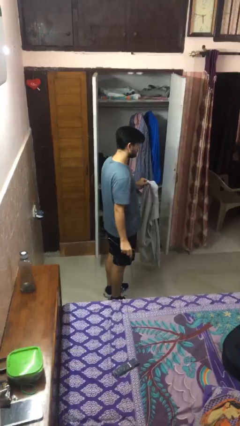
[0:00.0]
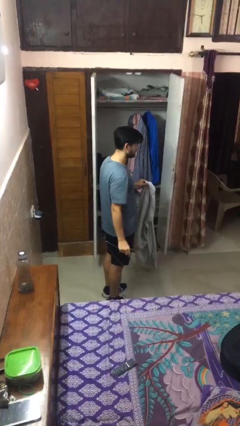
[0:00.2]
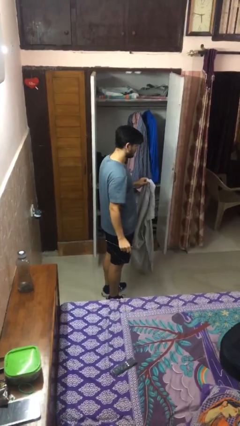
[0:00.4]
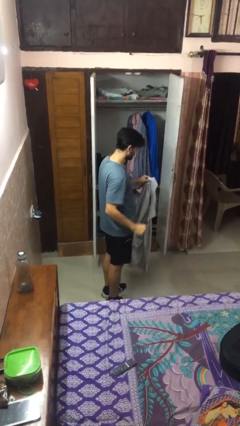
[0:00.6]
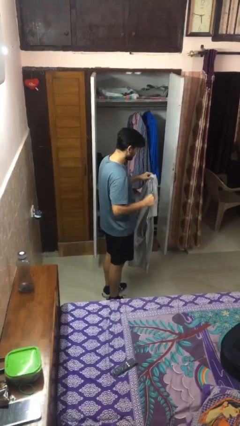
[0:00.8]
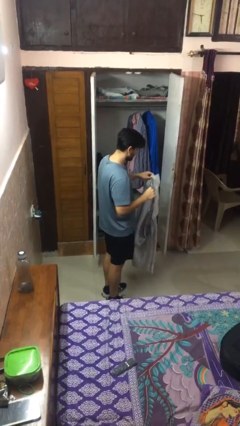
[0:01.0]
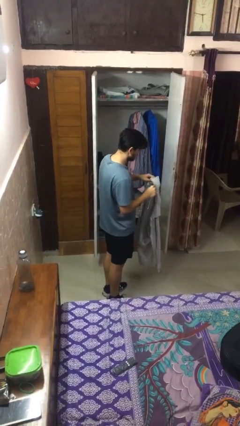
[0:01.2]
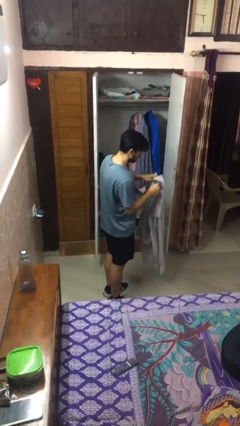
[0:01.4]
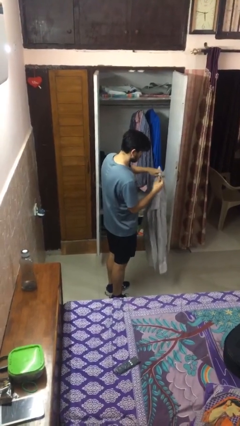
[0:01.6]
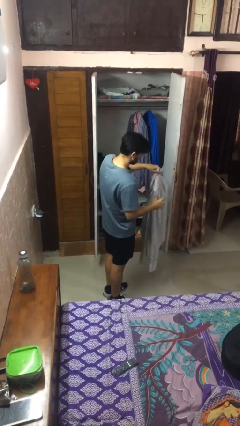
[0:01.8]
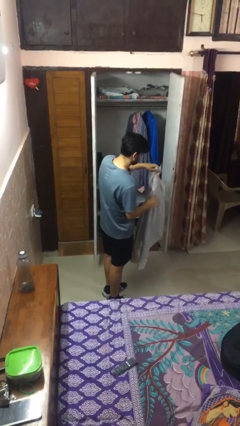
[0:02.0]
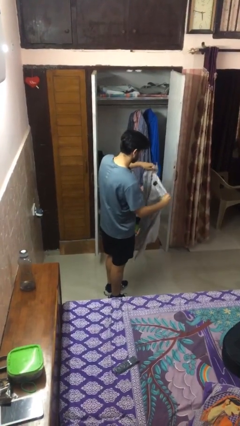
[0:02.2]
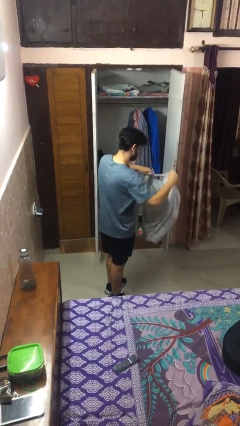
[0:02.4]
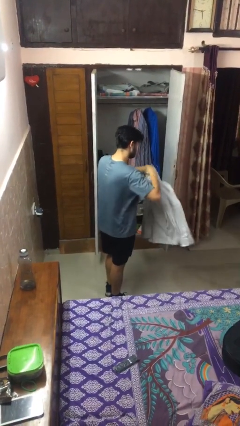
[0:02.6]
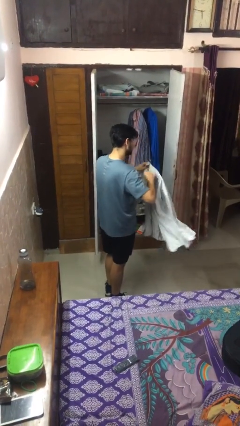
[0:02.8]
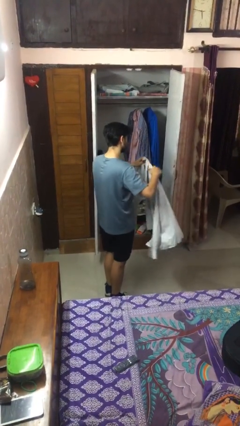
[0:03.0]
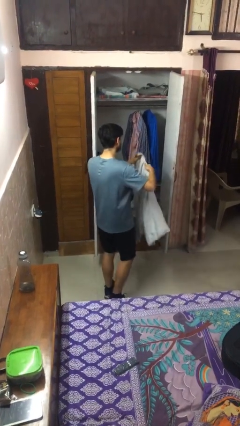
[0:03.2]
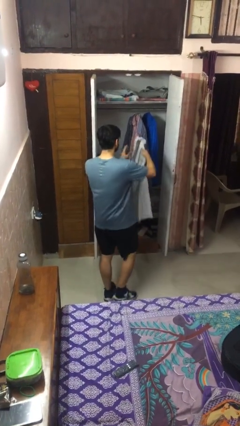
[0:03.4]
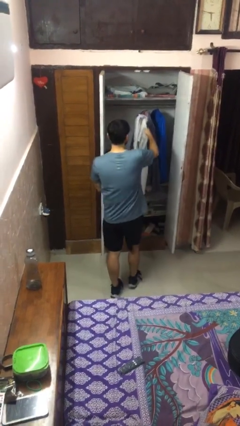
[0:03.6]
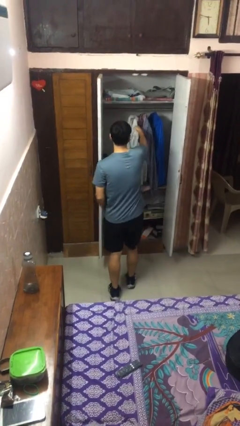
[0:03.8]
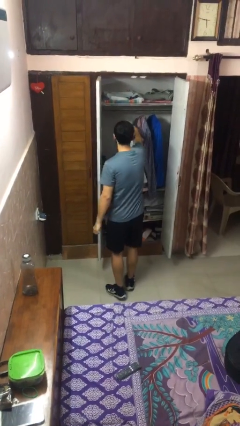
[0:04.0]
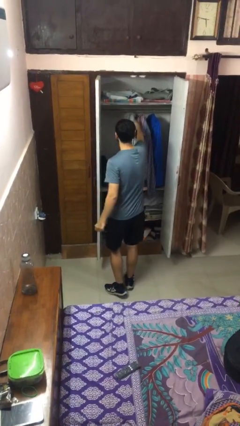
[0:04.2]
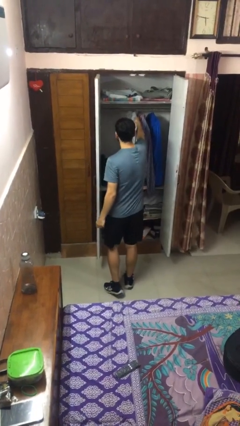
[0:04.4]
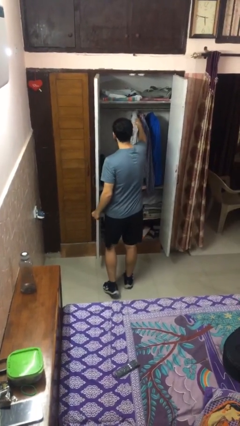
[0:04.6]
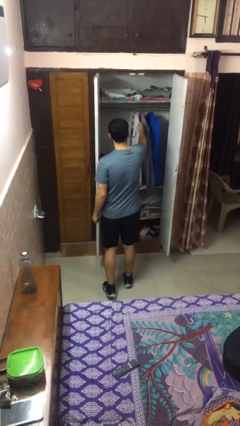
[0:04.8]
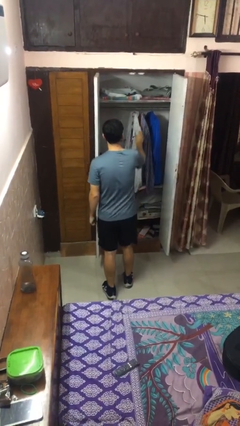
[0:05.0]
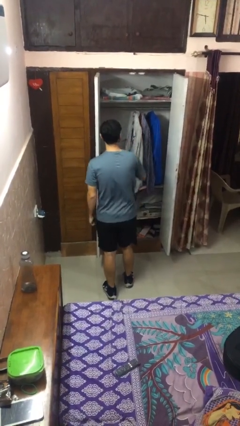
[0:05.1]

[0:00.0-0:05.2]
person puts clothes into closet

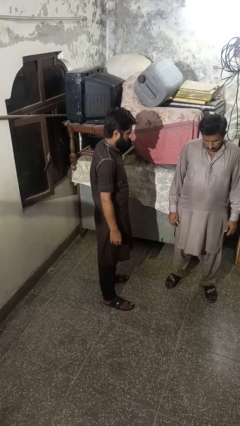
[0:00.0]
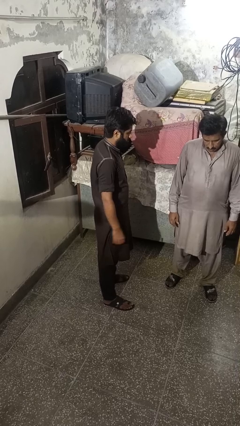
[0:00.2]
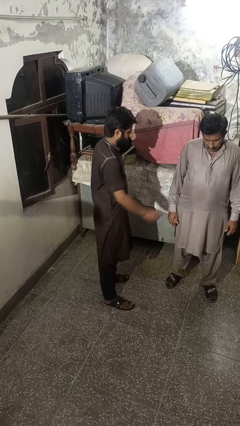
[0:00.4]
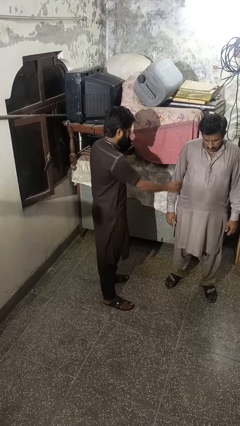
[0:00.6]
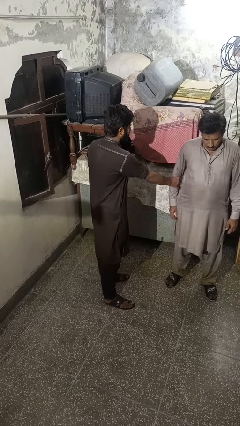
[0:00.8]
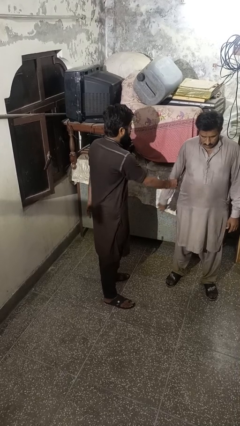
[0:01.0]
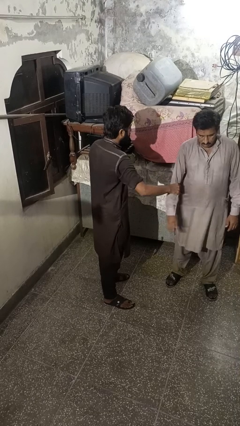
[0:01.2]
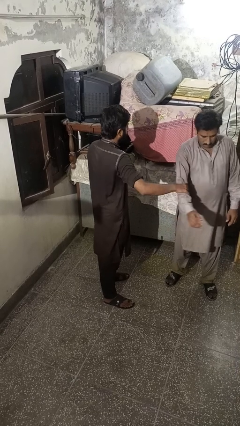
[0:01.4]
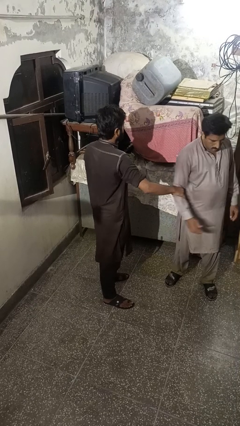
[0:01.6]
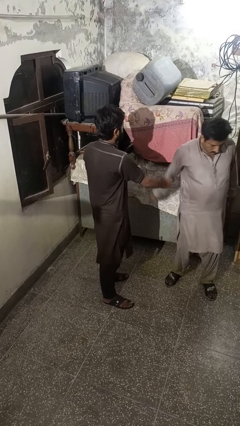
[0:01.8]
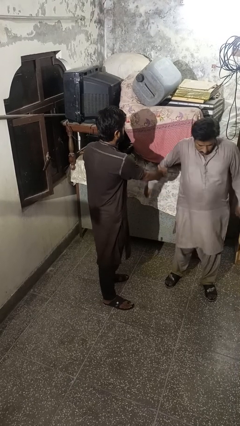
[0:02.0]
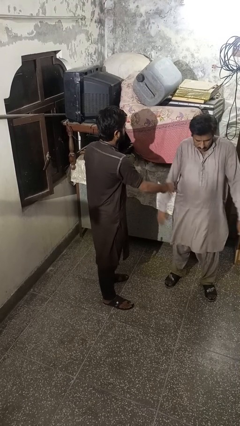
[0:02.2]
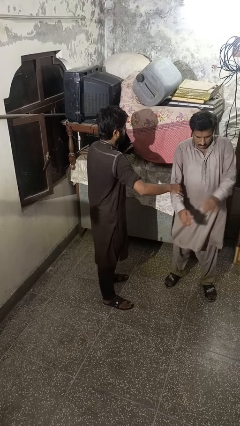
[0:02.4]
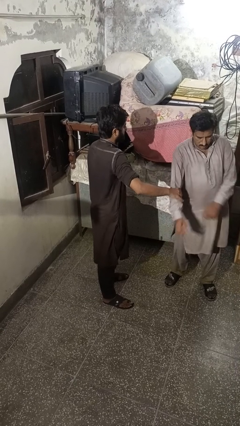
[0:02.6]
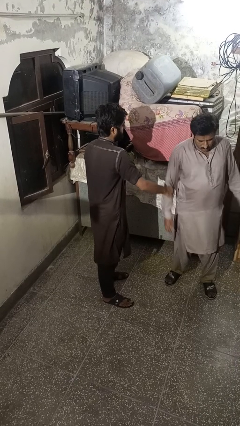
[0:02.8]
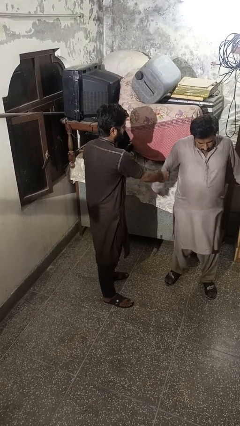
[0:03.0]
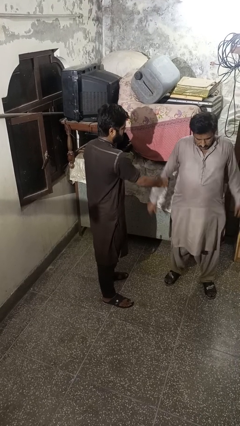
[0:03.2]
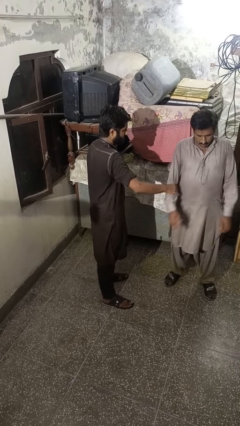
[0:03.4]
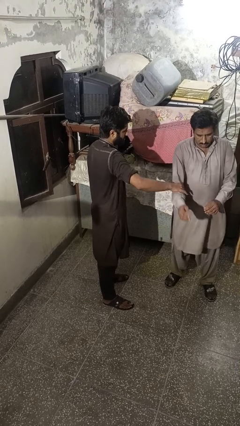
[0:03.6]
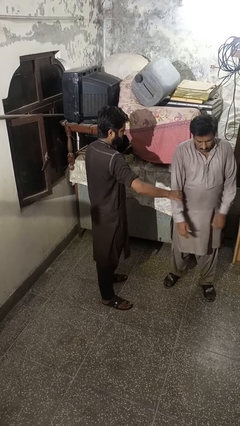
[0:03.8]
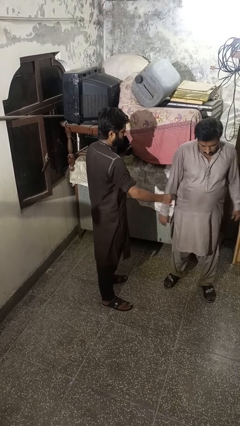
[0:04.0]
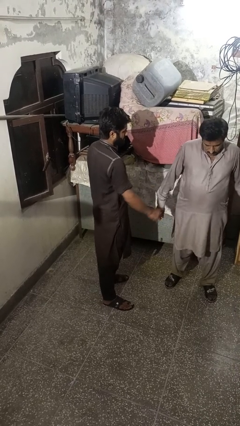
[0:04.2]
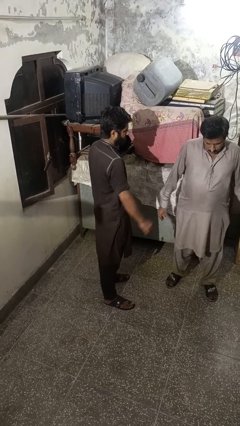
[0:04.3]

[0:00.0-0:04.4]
person grabs person by forearm

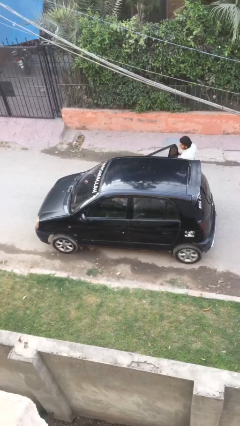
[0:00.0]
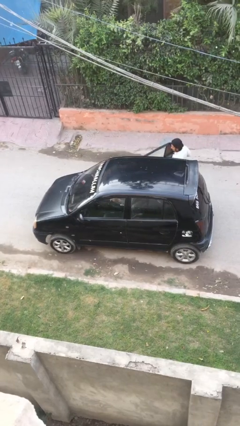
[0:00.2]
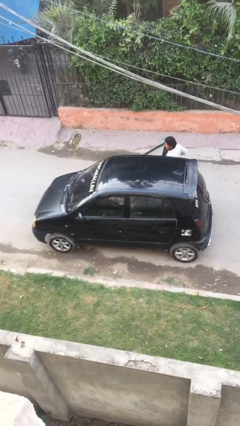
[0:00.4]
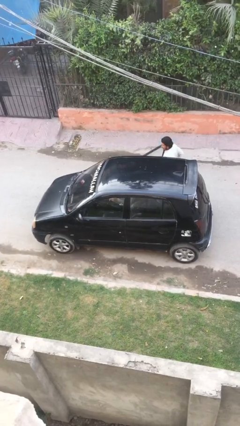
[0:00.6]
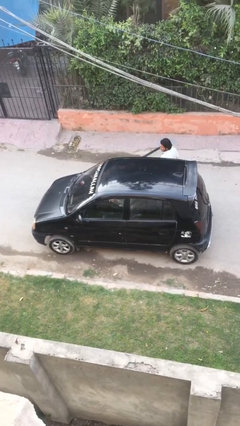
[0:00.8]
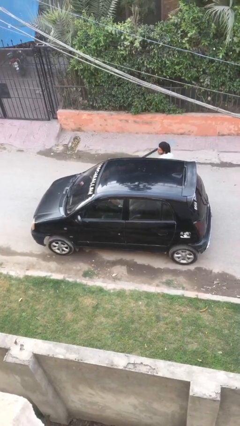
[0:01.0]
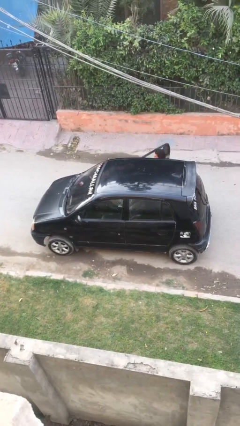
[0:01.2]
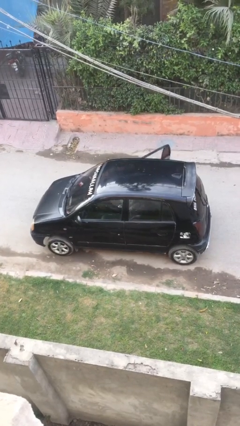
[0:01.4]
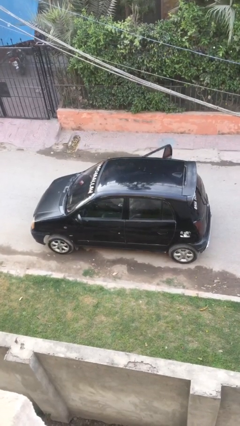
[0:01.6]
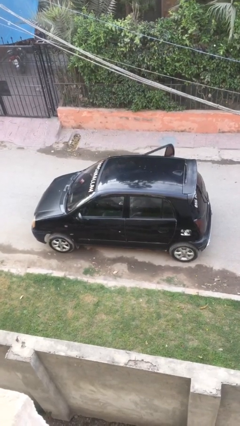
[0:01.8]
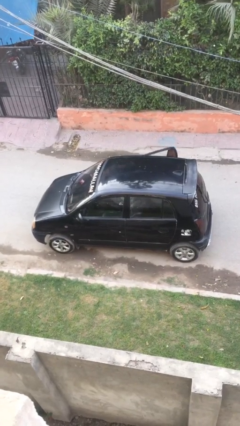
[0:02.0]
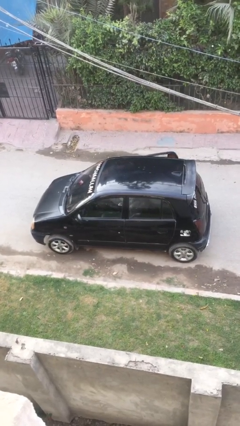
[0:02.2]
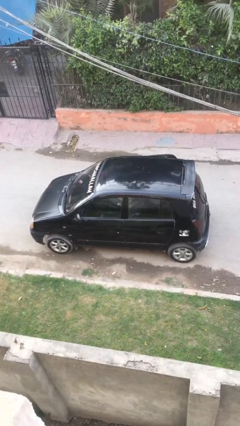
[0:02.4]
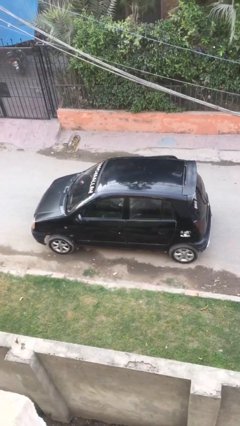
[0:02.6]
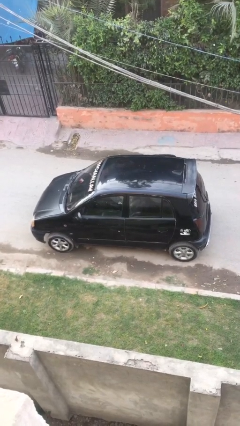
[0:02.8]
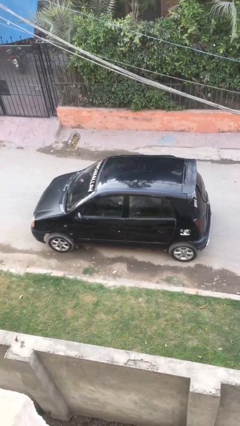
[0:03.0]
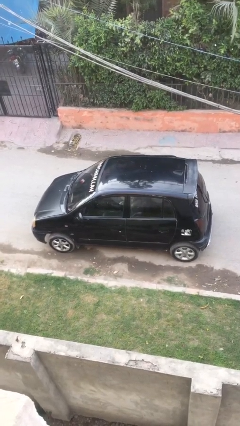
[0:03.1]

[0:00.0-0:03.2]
car picks up person

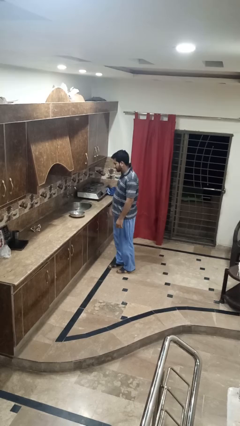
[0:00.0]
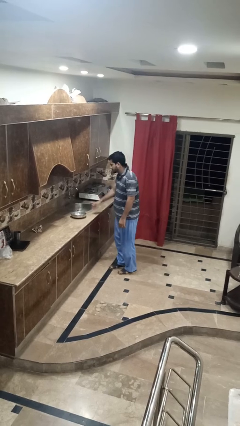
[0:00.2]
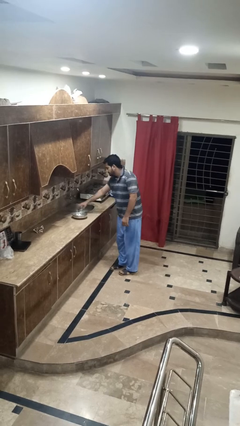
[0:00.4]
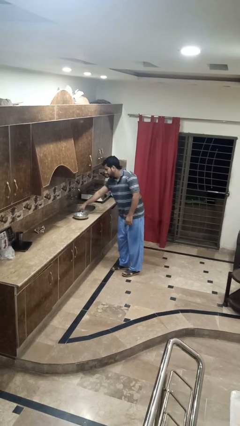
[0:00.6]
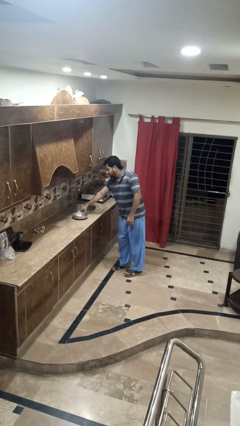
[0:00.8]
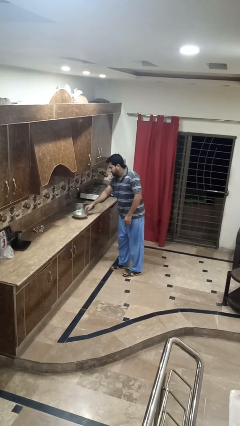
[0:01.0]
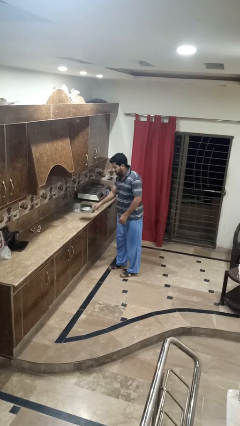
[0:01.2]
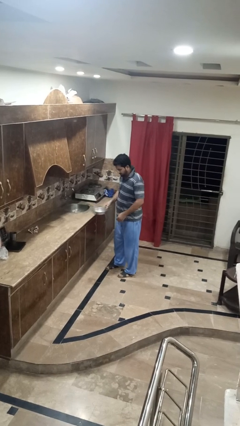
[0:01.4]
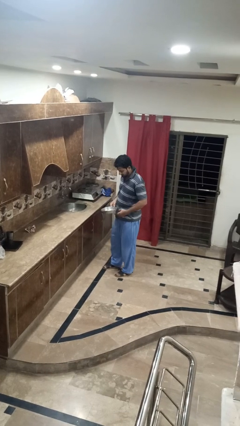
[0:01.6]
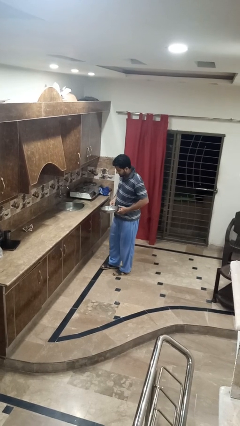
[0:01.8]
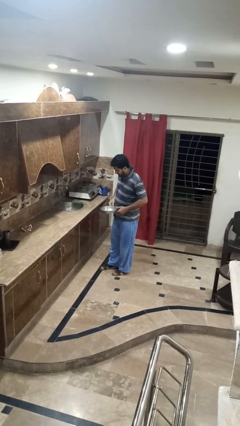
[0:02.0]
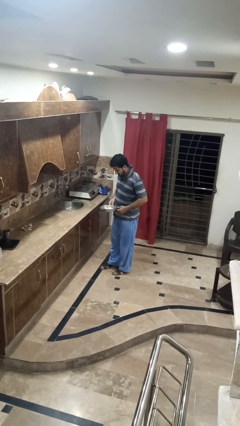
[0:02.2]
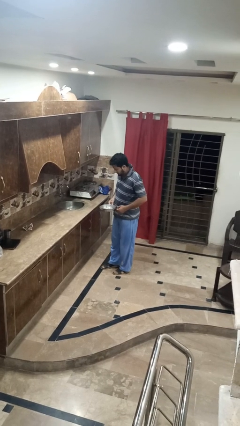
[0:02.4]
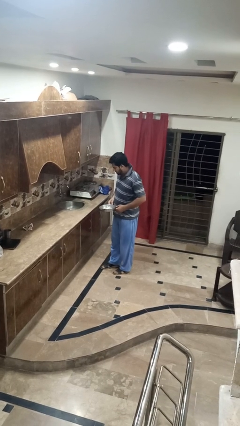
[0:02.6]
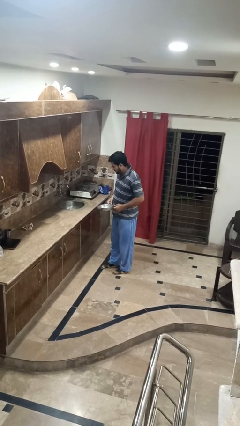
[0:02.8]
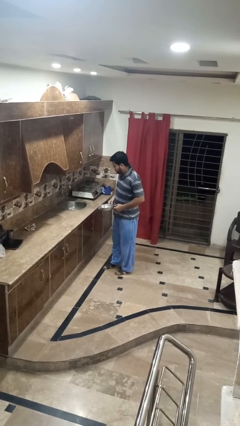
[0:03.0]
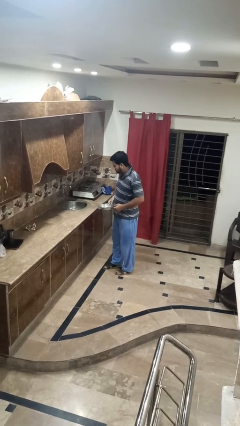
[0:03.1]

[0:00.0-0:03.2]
person picks up object from countertop

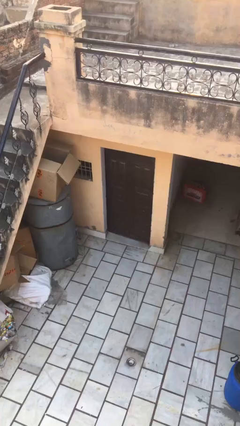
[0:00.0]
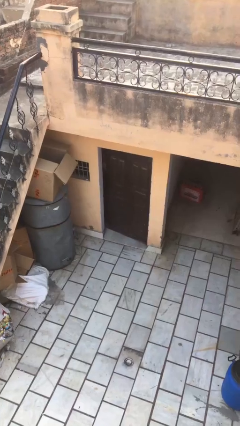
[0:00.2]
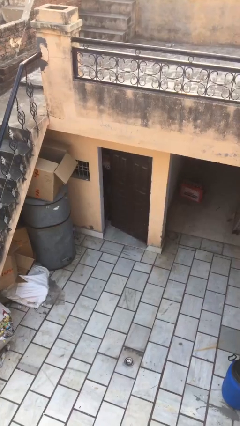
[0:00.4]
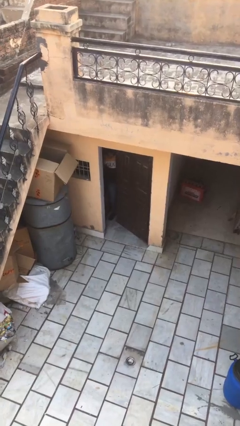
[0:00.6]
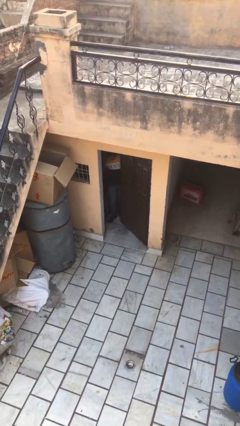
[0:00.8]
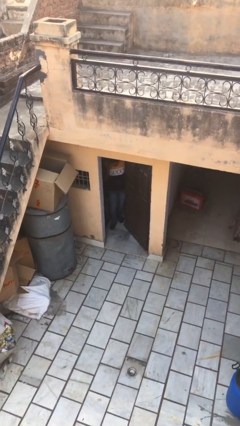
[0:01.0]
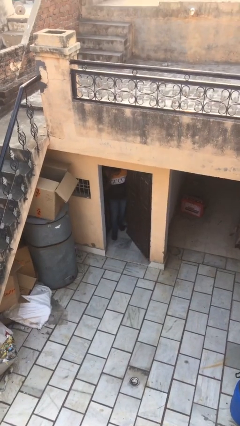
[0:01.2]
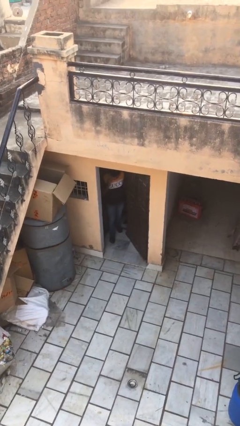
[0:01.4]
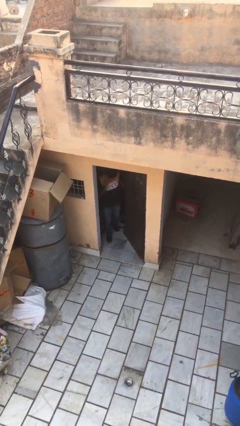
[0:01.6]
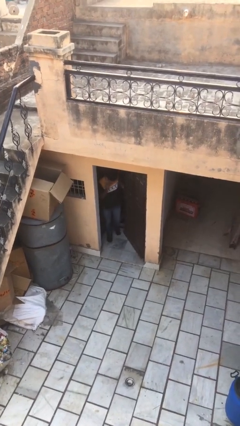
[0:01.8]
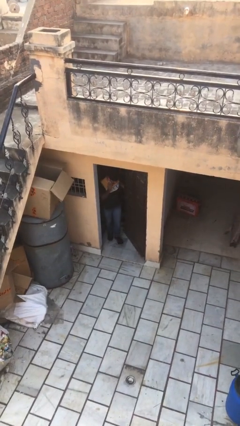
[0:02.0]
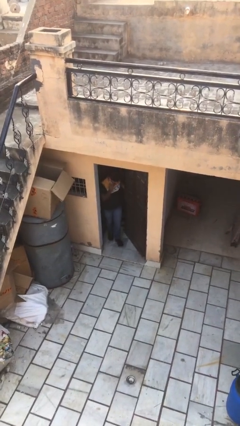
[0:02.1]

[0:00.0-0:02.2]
person opens facility door
